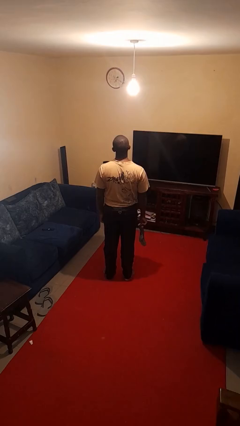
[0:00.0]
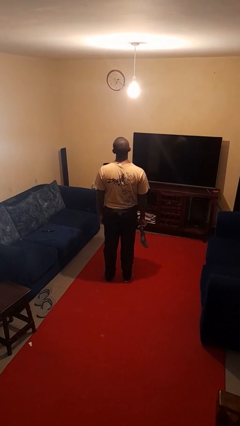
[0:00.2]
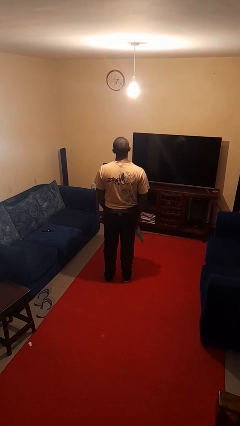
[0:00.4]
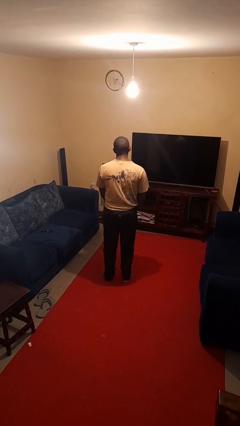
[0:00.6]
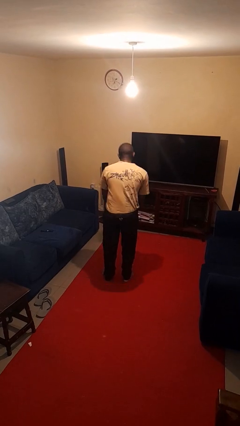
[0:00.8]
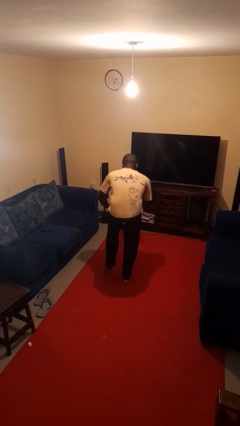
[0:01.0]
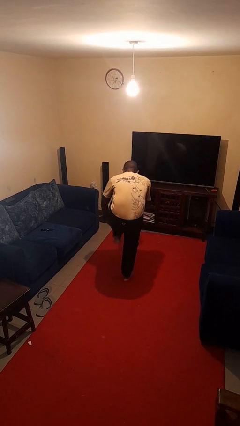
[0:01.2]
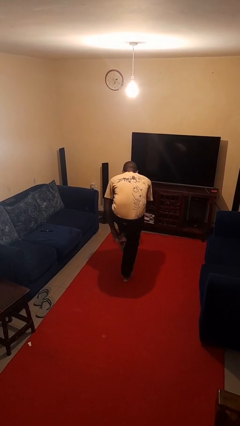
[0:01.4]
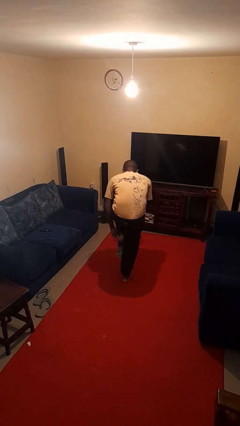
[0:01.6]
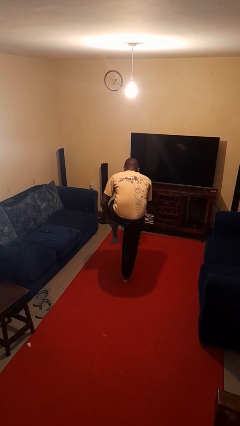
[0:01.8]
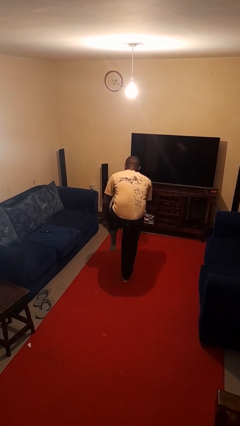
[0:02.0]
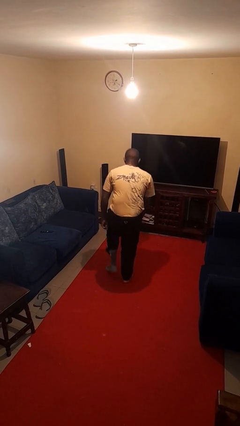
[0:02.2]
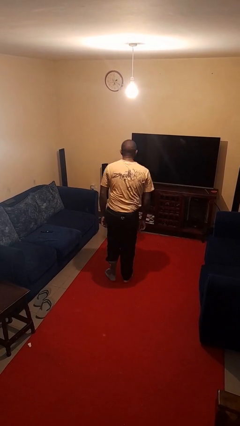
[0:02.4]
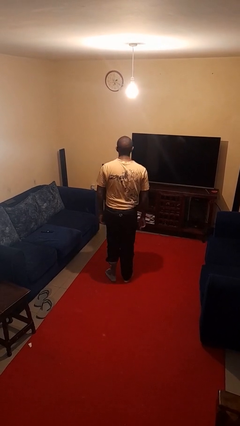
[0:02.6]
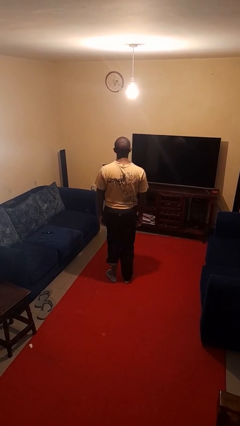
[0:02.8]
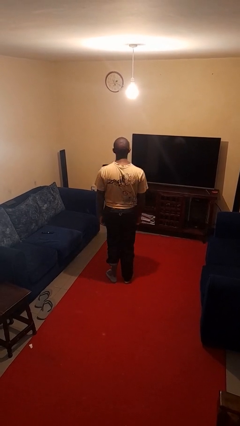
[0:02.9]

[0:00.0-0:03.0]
person puts on socks

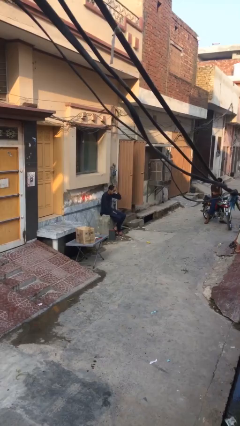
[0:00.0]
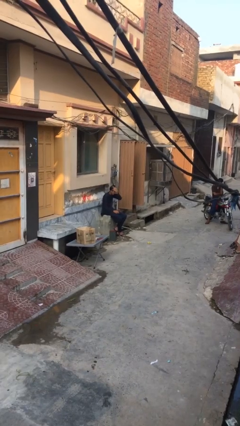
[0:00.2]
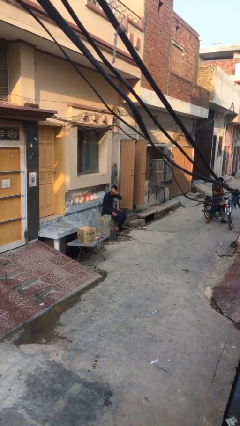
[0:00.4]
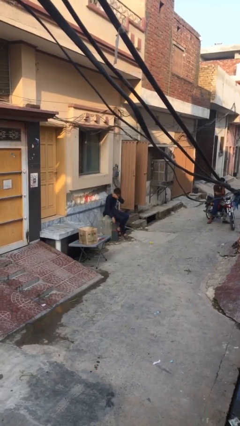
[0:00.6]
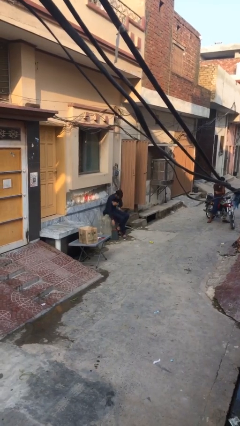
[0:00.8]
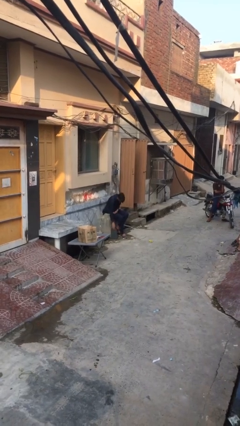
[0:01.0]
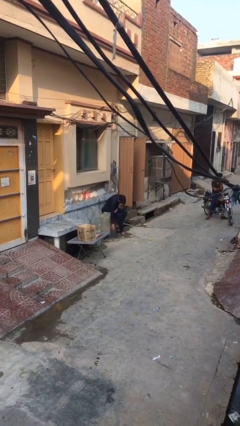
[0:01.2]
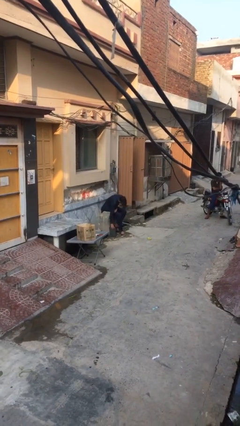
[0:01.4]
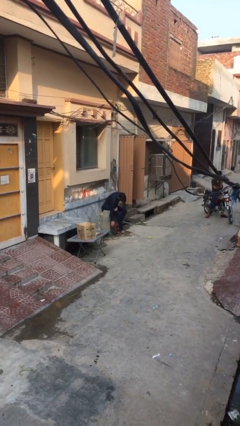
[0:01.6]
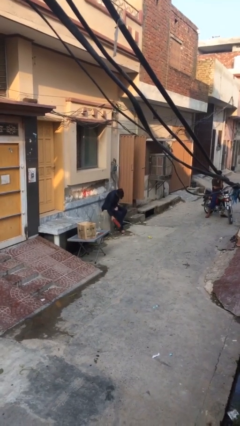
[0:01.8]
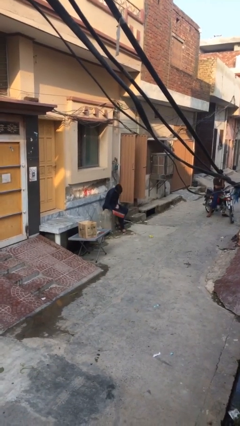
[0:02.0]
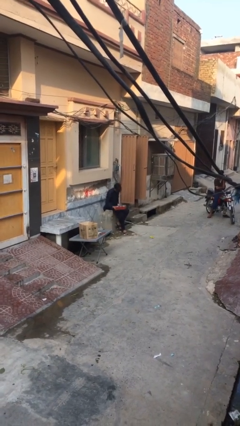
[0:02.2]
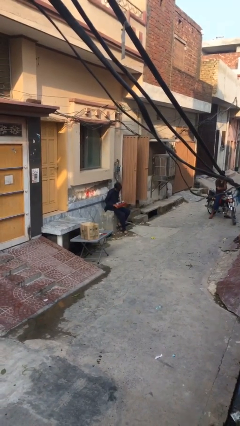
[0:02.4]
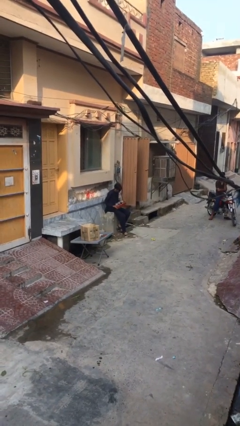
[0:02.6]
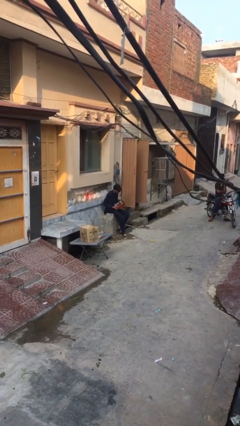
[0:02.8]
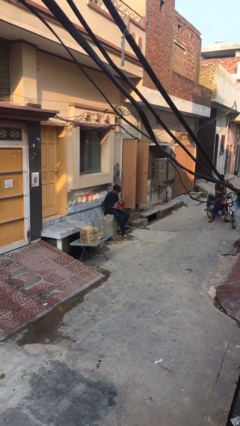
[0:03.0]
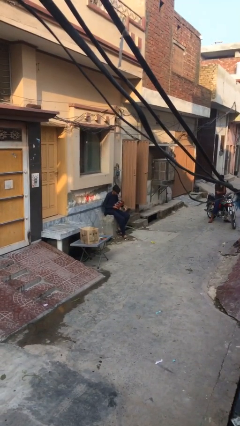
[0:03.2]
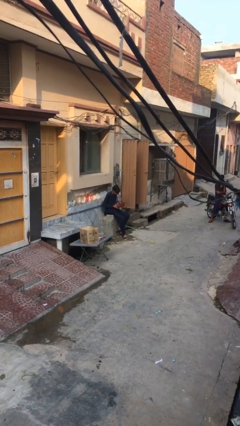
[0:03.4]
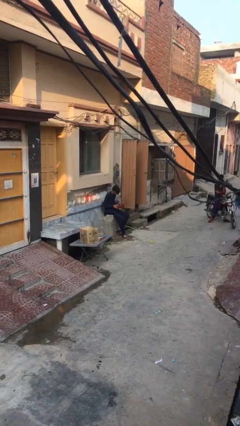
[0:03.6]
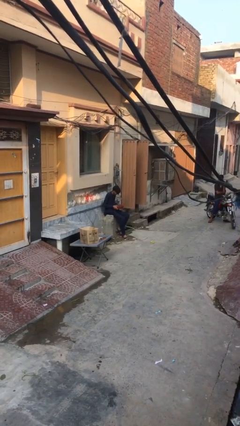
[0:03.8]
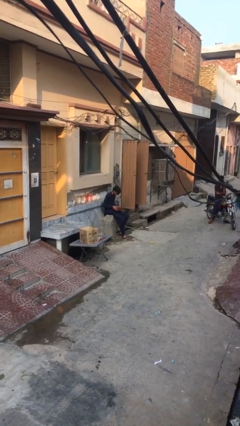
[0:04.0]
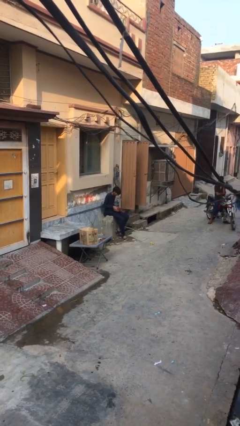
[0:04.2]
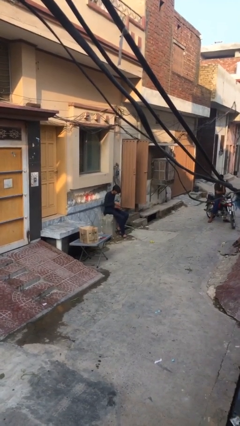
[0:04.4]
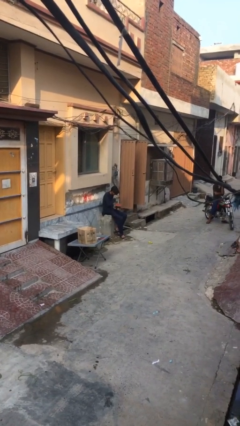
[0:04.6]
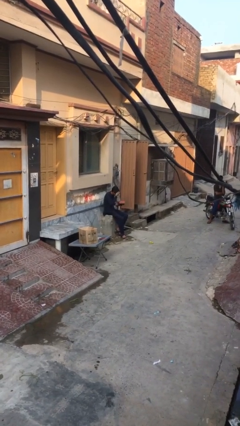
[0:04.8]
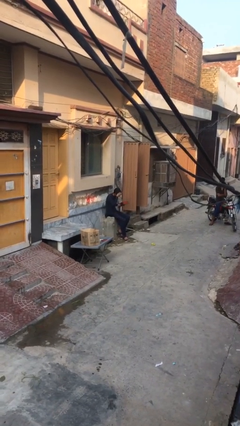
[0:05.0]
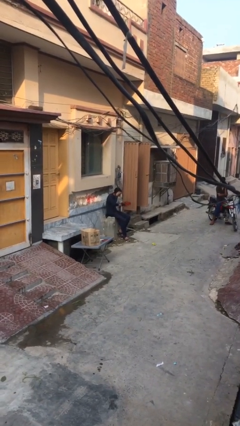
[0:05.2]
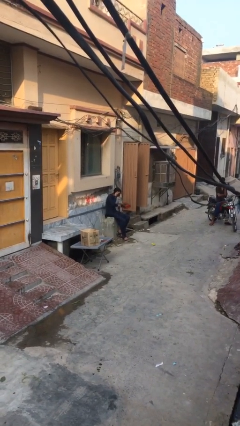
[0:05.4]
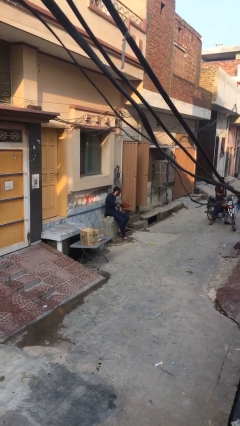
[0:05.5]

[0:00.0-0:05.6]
person picks up object from floor

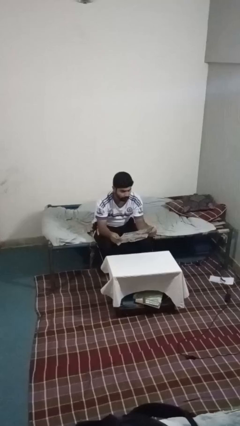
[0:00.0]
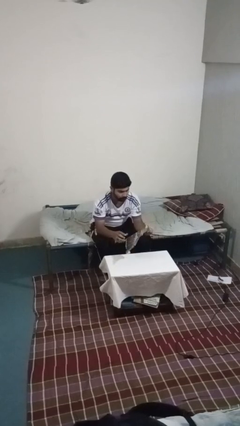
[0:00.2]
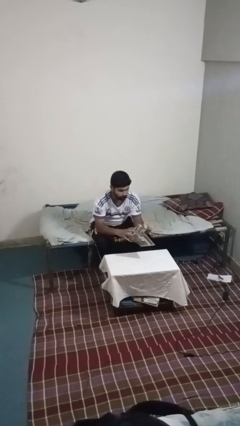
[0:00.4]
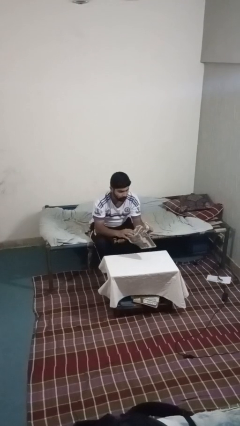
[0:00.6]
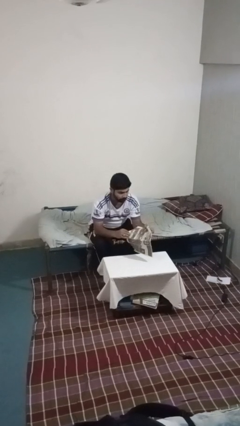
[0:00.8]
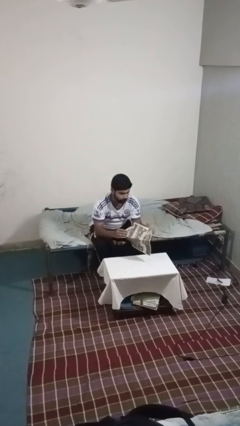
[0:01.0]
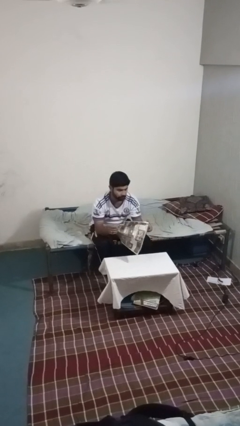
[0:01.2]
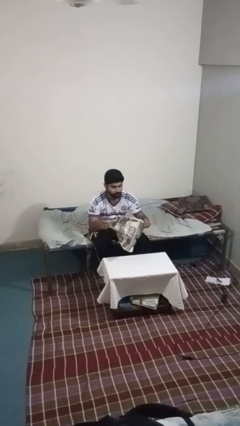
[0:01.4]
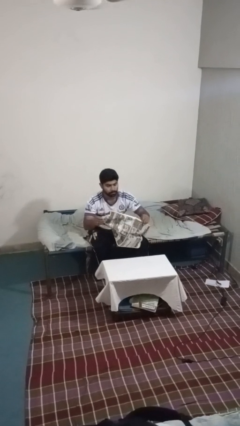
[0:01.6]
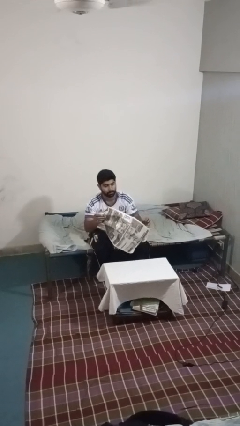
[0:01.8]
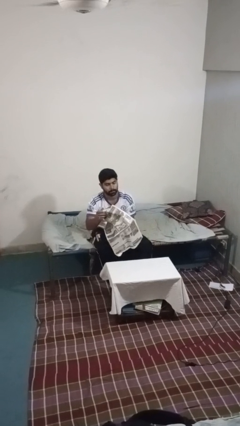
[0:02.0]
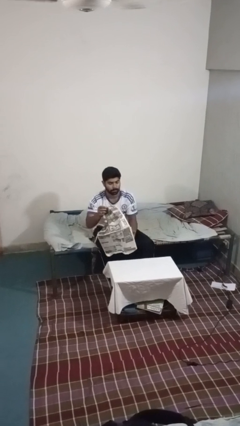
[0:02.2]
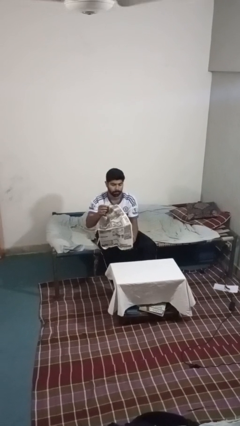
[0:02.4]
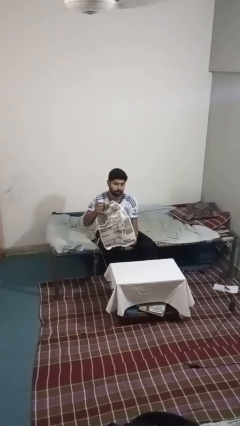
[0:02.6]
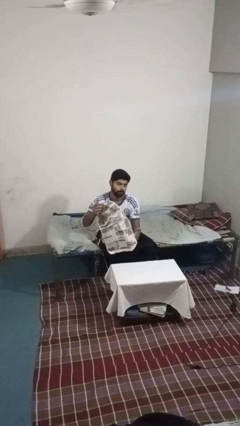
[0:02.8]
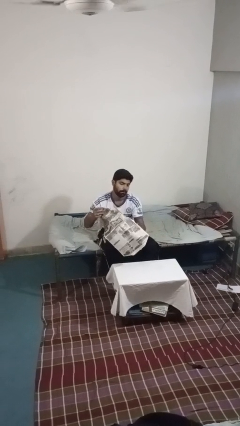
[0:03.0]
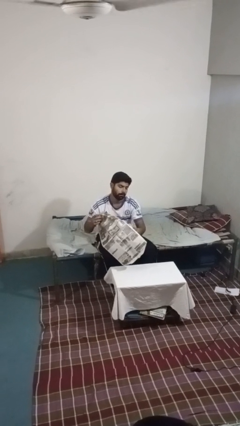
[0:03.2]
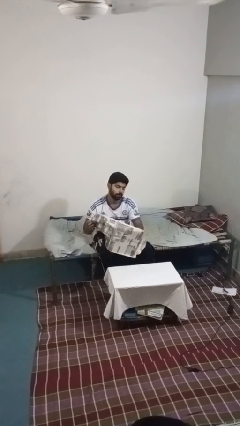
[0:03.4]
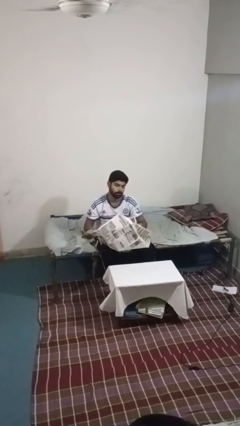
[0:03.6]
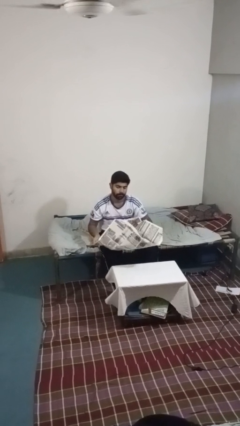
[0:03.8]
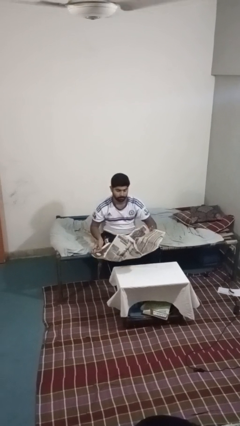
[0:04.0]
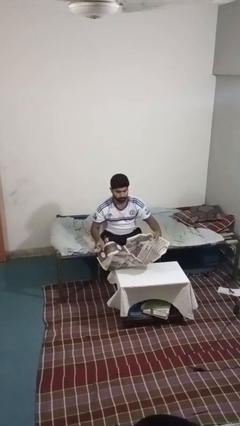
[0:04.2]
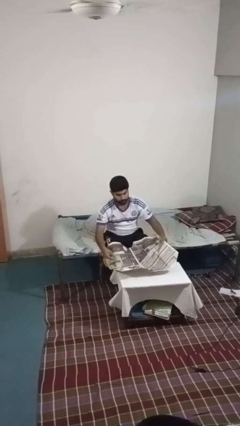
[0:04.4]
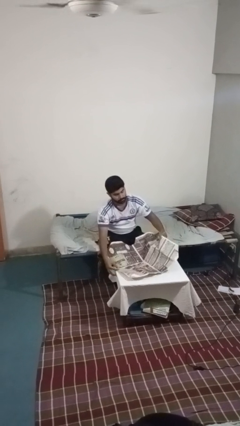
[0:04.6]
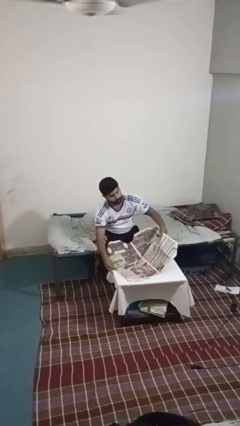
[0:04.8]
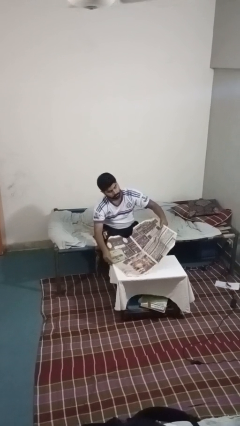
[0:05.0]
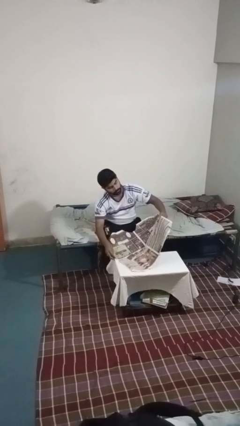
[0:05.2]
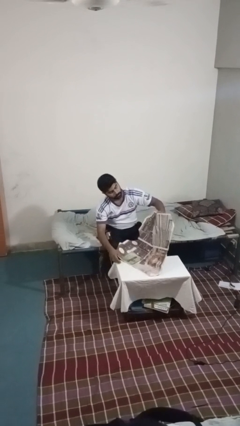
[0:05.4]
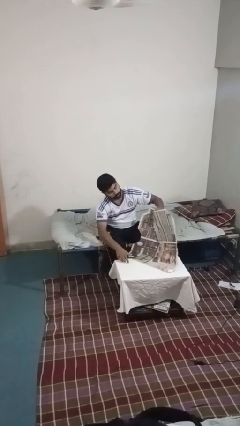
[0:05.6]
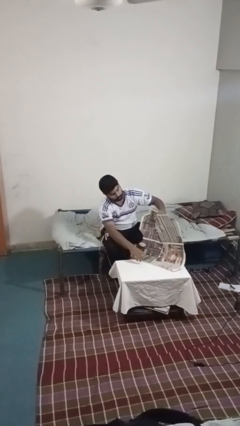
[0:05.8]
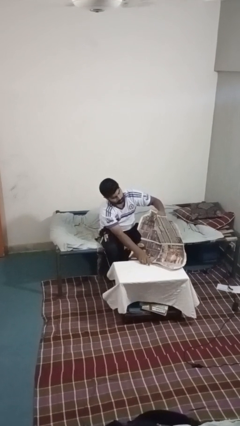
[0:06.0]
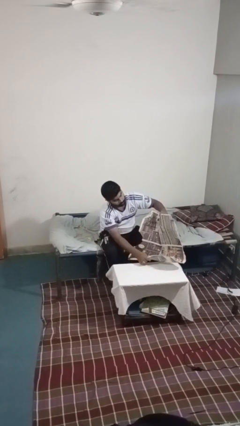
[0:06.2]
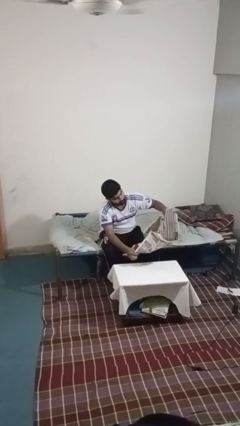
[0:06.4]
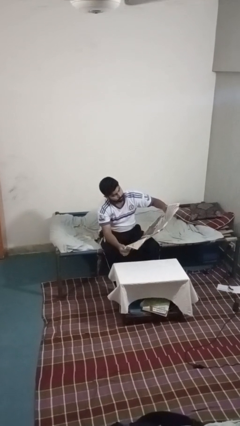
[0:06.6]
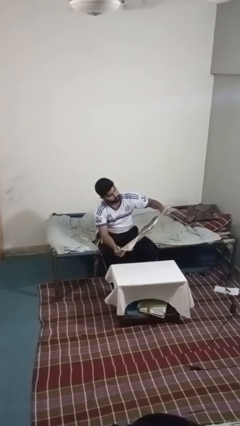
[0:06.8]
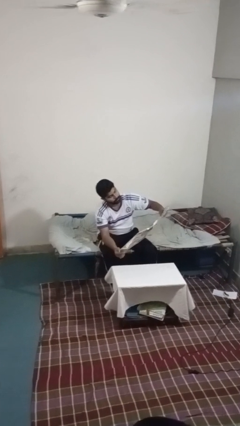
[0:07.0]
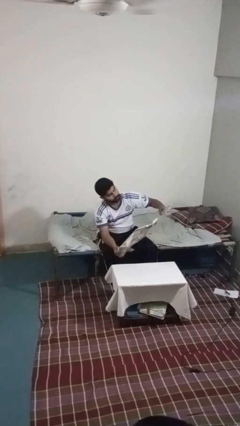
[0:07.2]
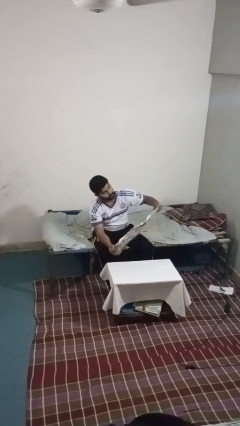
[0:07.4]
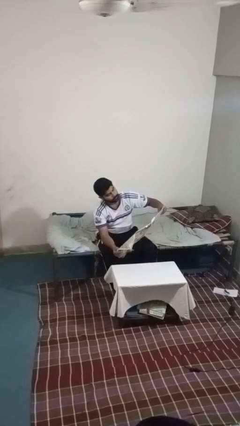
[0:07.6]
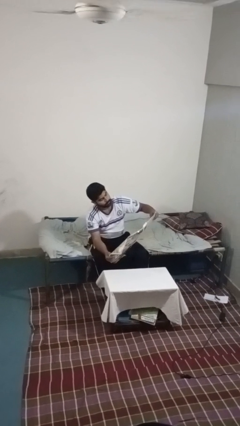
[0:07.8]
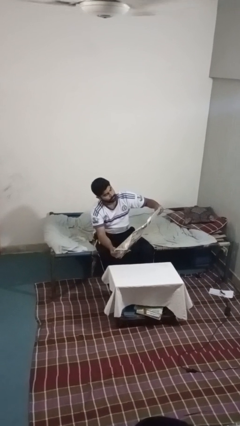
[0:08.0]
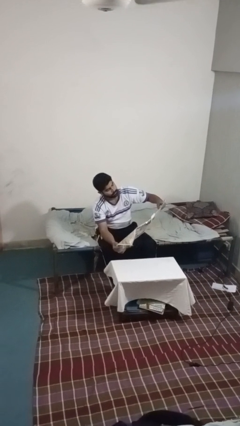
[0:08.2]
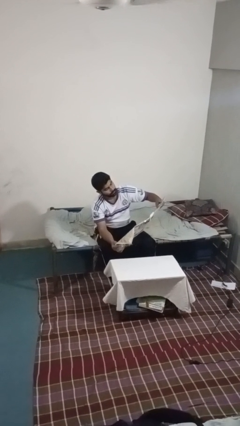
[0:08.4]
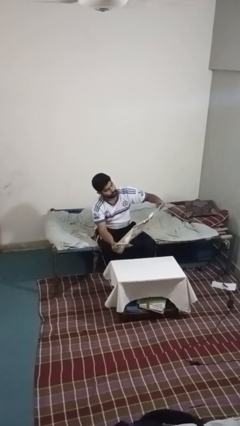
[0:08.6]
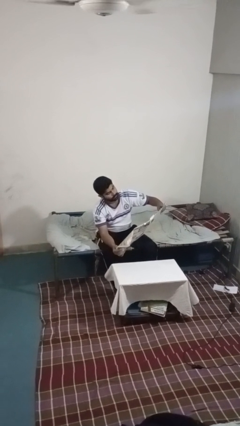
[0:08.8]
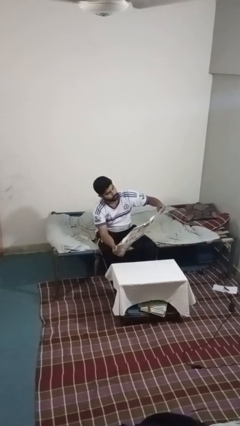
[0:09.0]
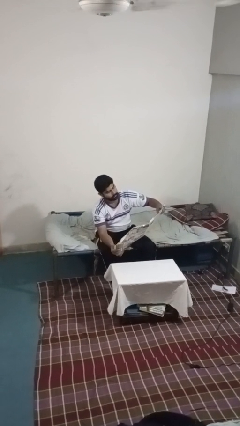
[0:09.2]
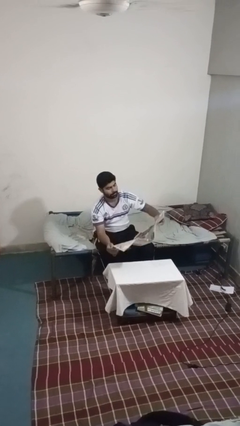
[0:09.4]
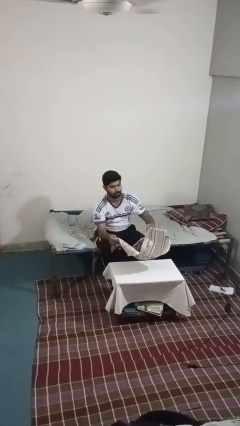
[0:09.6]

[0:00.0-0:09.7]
person reads newspaper
